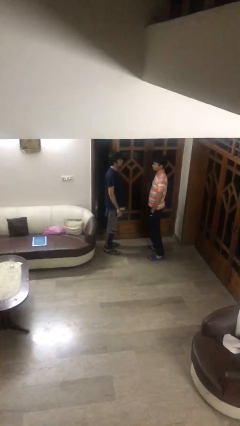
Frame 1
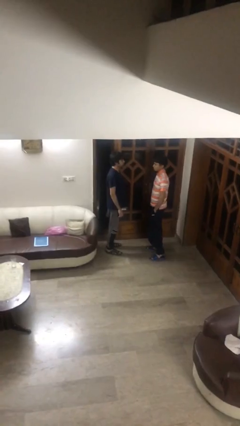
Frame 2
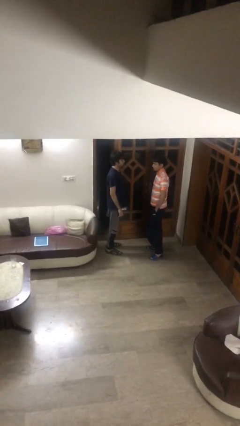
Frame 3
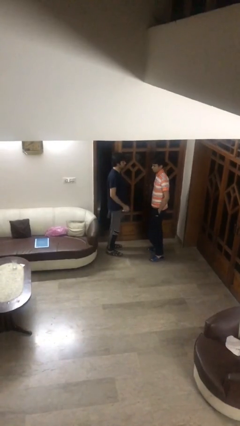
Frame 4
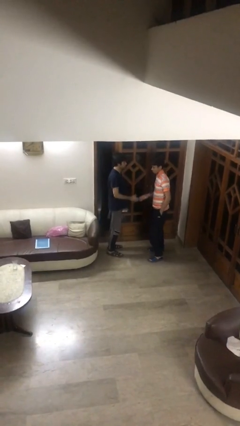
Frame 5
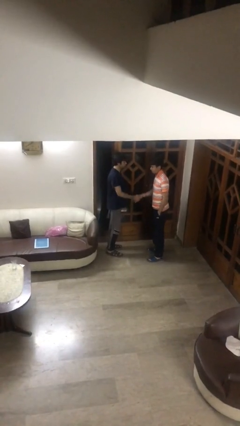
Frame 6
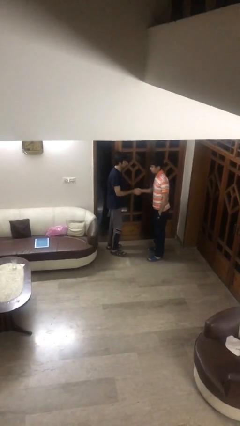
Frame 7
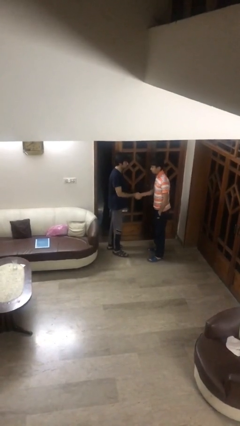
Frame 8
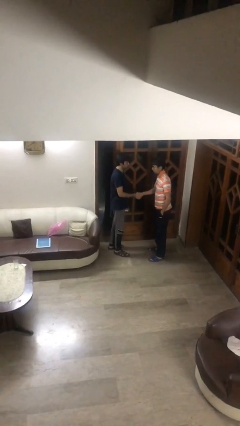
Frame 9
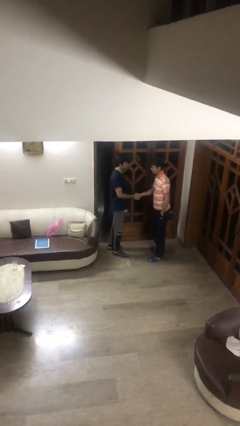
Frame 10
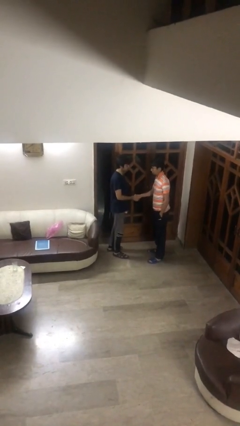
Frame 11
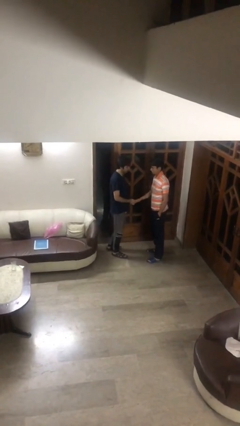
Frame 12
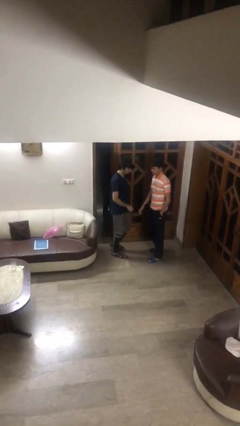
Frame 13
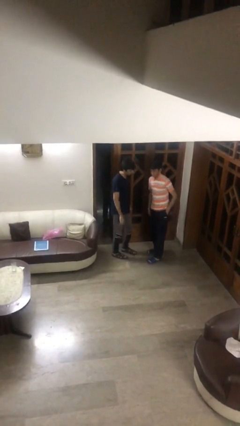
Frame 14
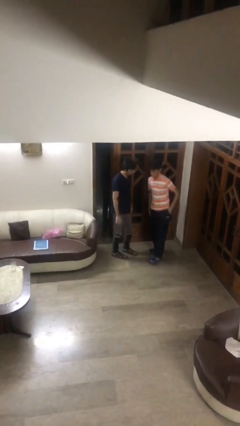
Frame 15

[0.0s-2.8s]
person shakes hand

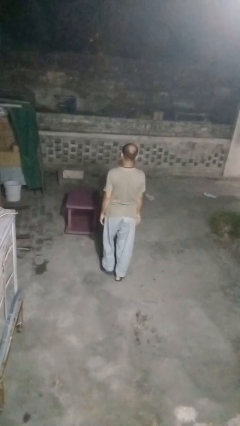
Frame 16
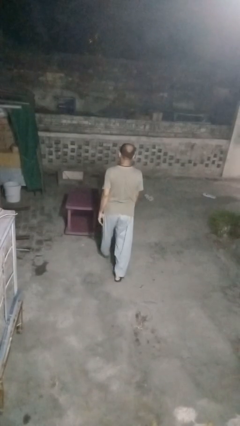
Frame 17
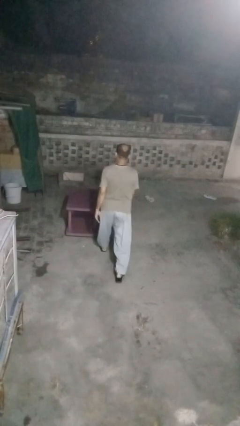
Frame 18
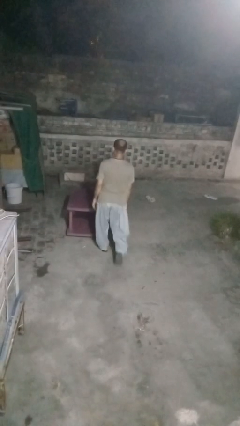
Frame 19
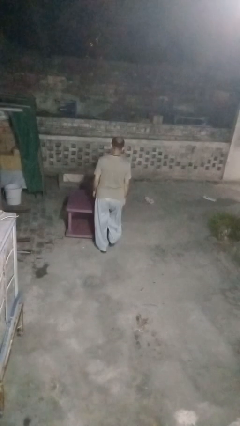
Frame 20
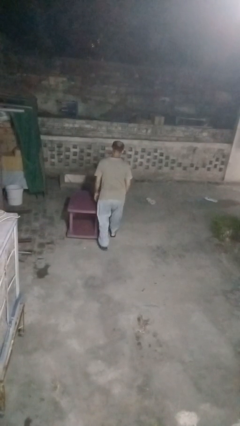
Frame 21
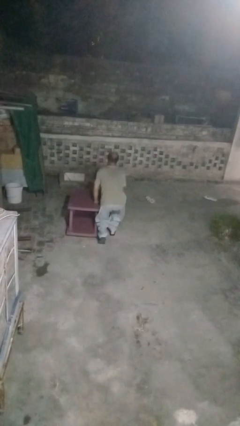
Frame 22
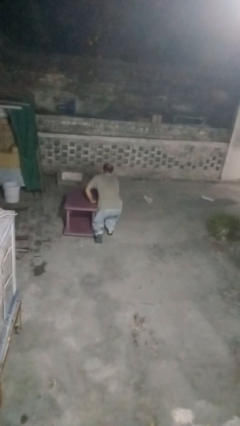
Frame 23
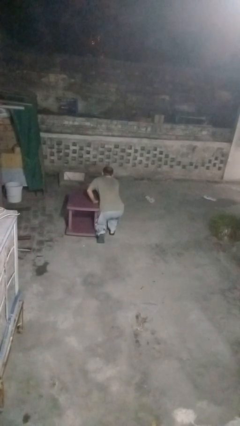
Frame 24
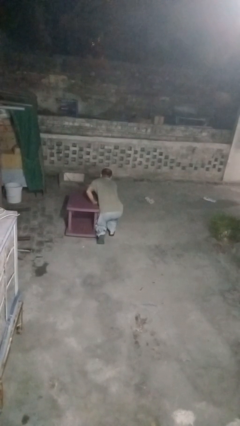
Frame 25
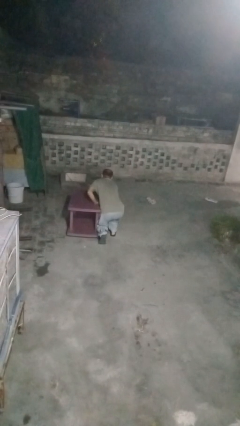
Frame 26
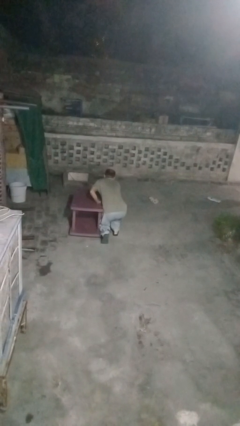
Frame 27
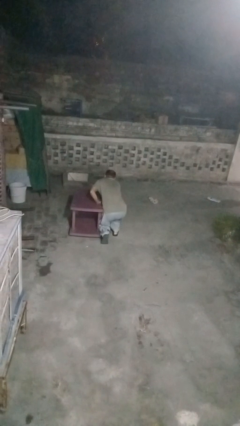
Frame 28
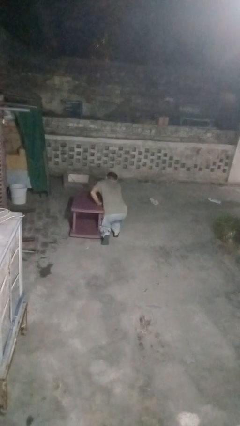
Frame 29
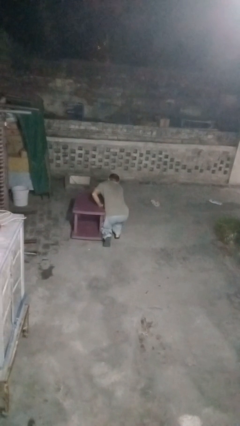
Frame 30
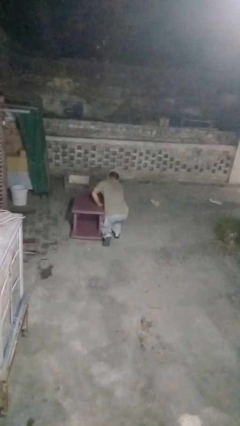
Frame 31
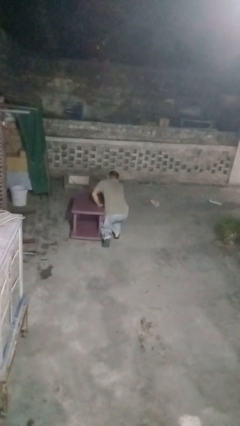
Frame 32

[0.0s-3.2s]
person bumps into table

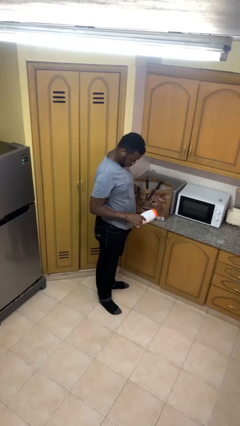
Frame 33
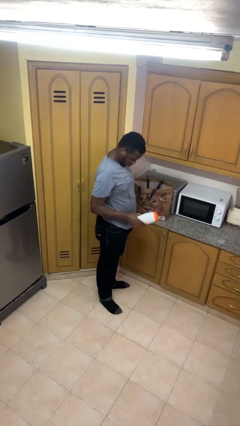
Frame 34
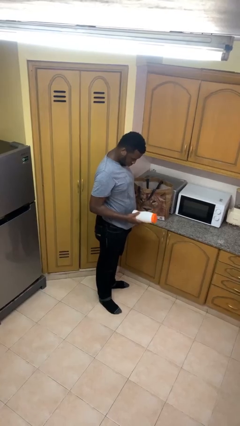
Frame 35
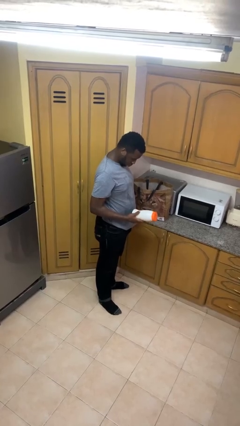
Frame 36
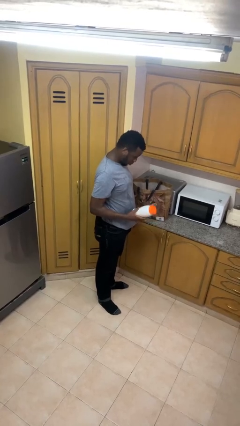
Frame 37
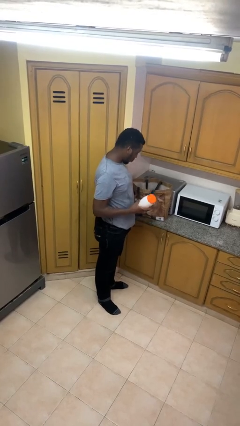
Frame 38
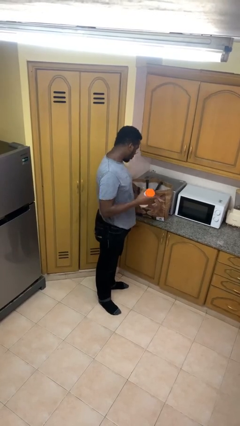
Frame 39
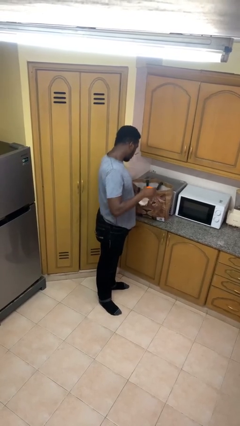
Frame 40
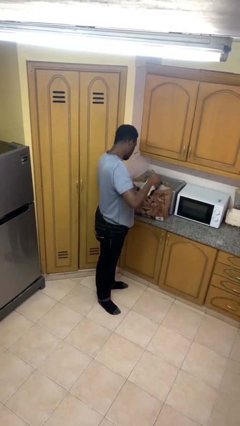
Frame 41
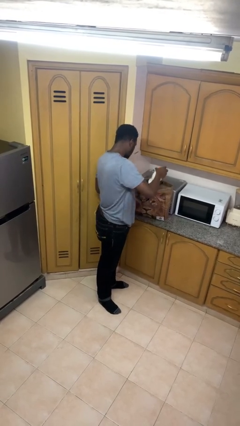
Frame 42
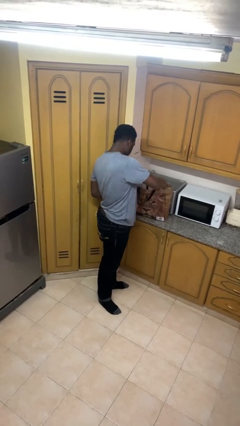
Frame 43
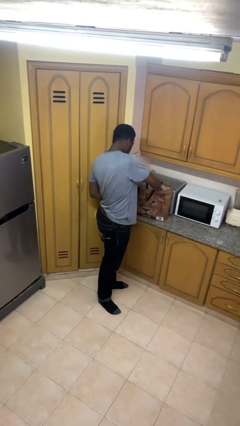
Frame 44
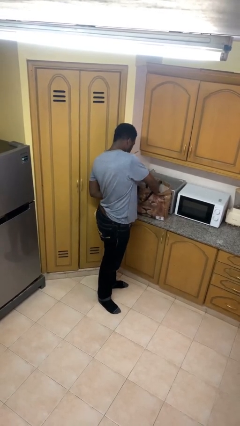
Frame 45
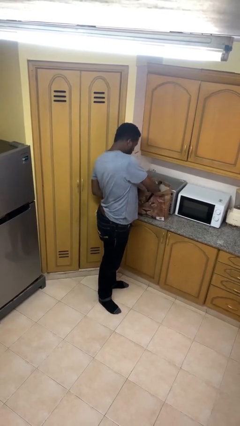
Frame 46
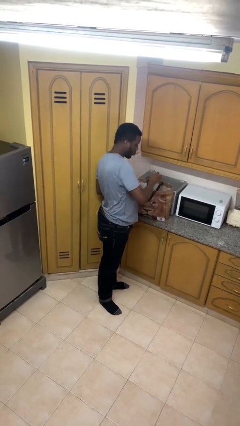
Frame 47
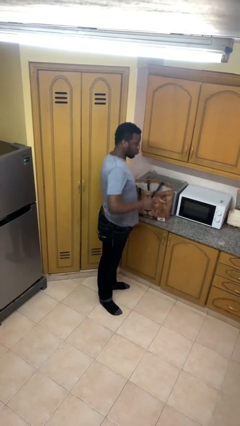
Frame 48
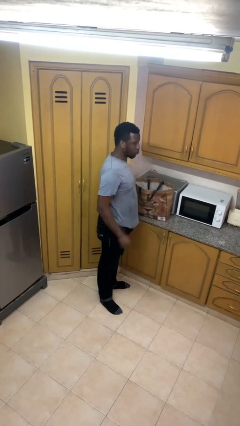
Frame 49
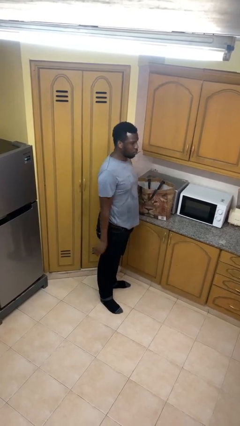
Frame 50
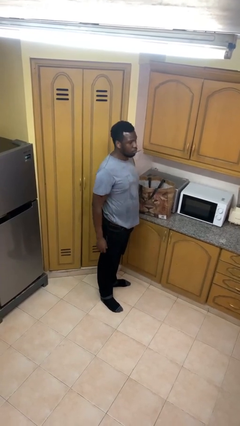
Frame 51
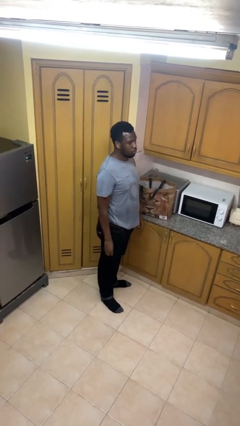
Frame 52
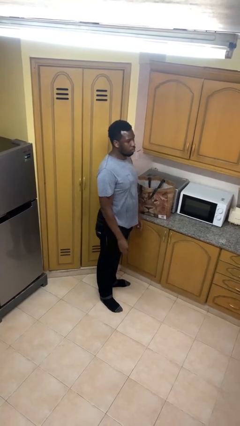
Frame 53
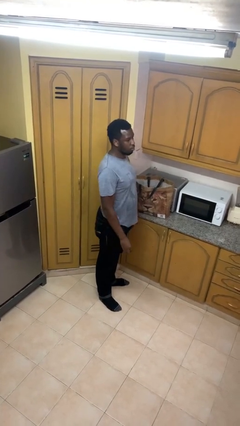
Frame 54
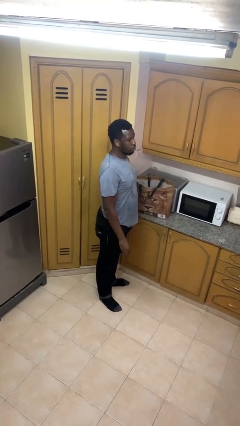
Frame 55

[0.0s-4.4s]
person puts object into bag

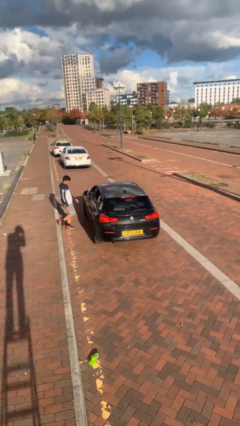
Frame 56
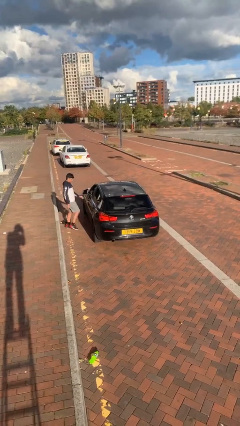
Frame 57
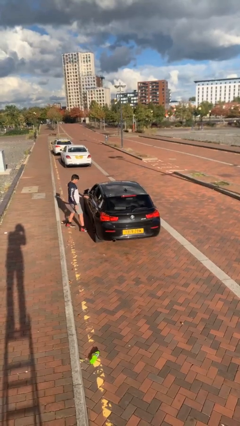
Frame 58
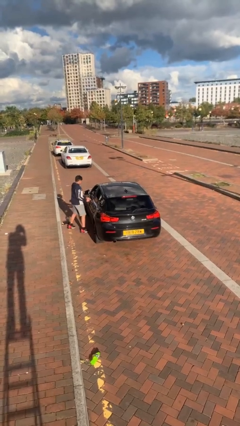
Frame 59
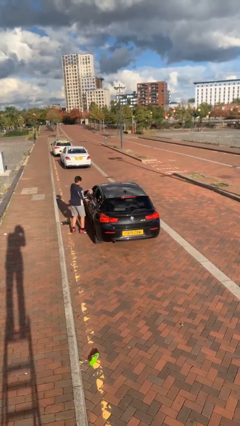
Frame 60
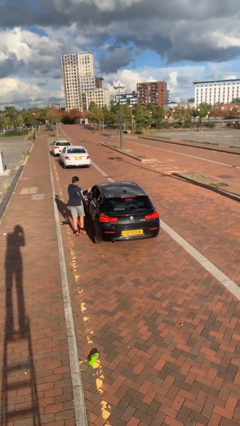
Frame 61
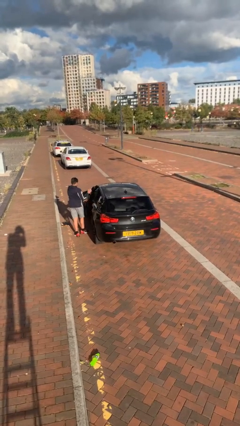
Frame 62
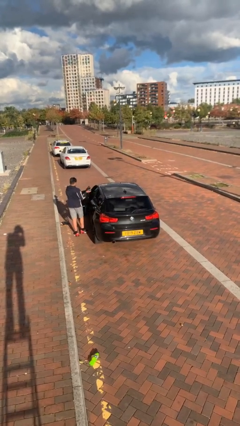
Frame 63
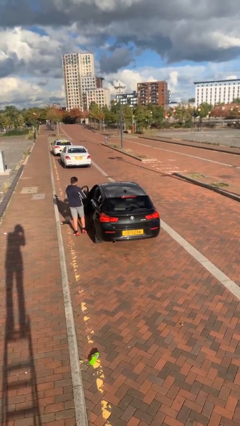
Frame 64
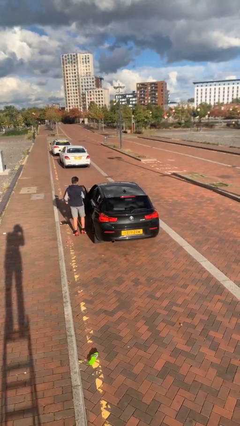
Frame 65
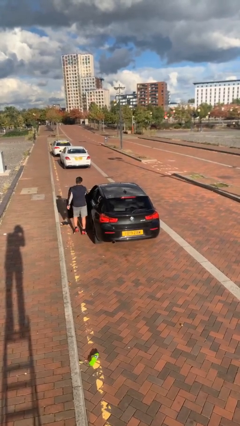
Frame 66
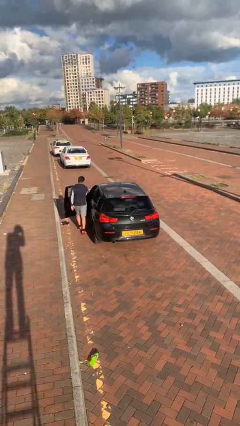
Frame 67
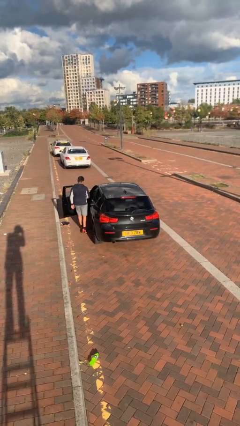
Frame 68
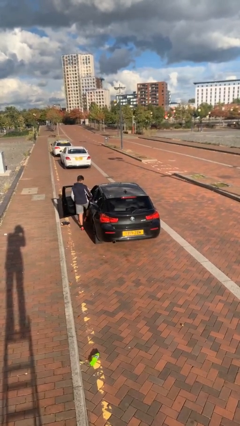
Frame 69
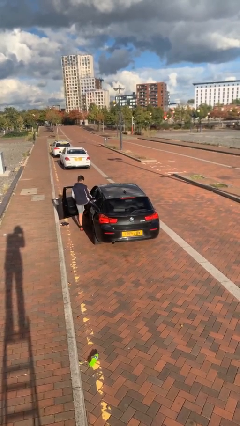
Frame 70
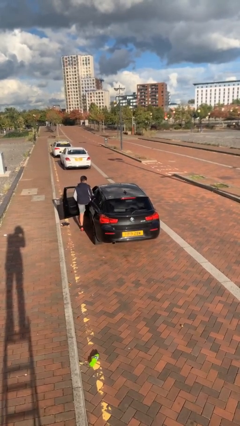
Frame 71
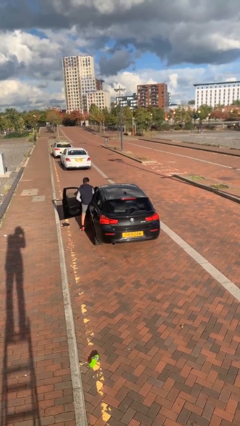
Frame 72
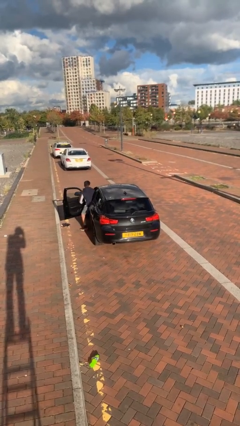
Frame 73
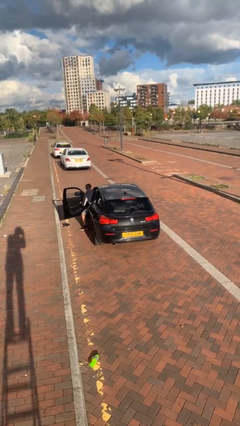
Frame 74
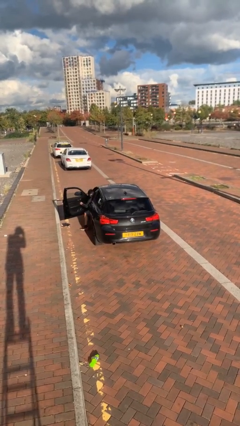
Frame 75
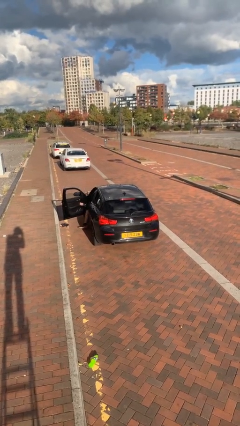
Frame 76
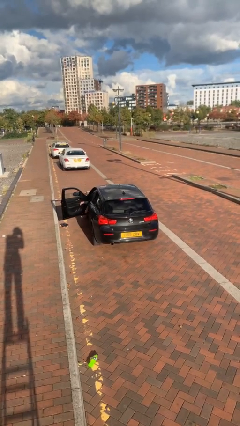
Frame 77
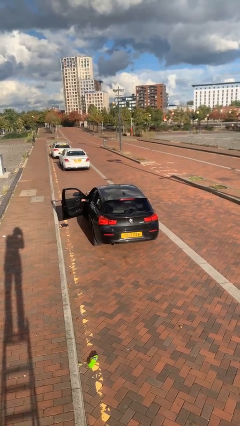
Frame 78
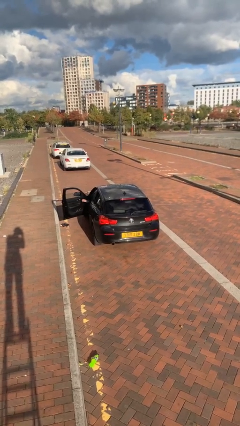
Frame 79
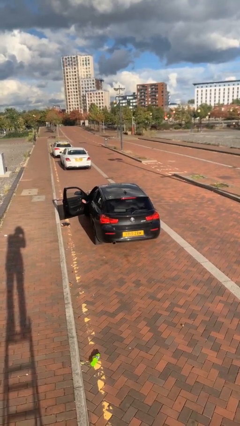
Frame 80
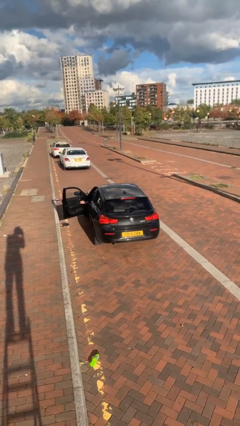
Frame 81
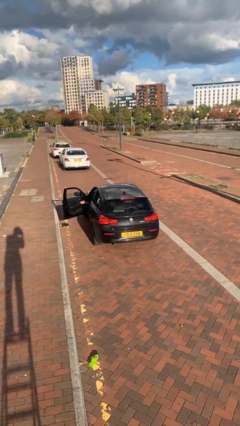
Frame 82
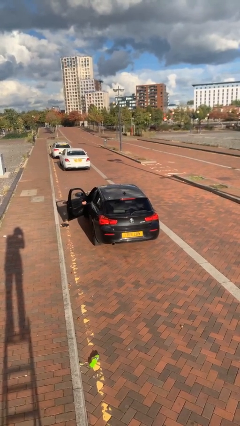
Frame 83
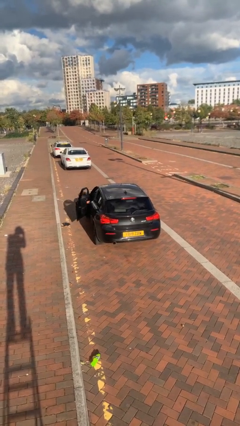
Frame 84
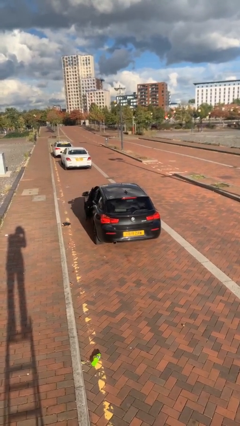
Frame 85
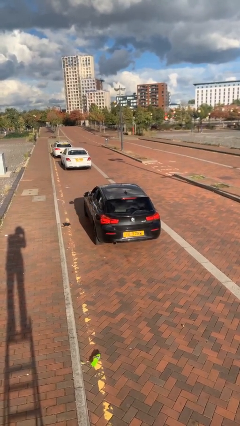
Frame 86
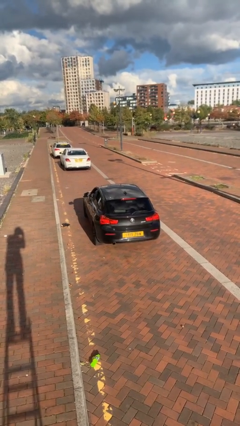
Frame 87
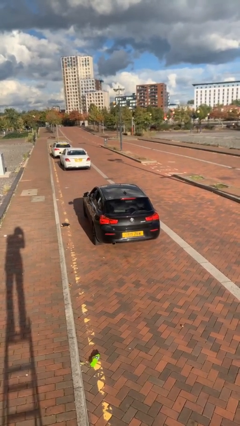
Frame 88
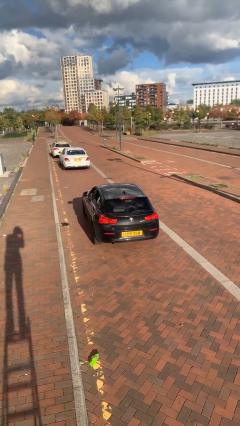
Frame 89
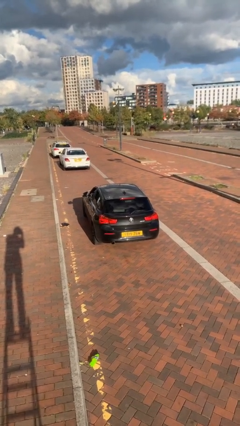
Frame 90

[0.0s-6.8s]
car picks up person

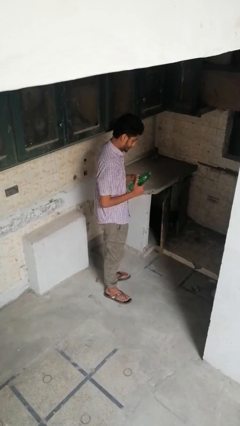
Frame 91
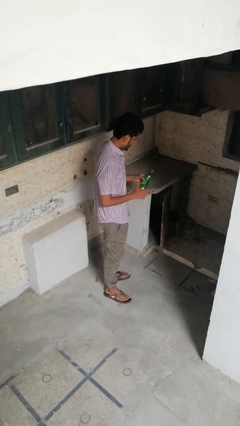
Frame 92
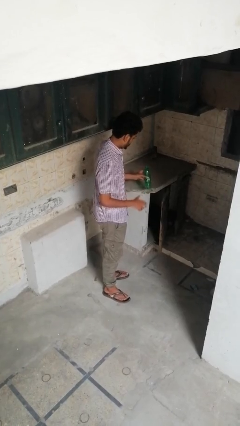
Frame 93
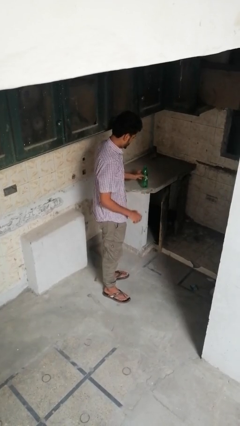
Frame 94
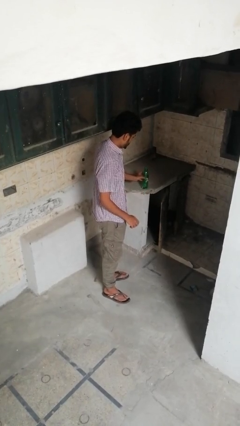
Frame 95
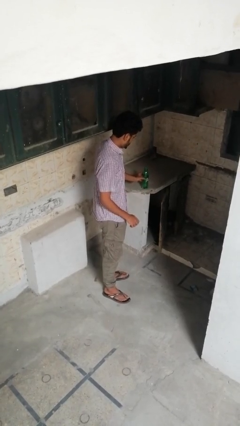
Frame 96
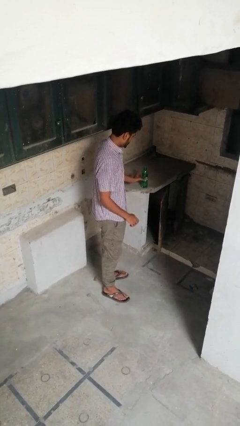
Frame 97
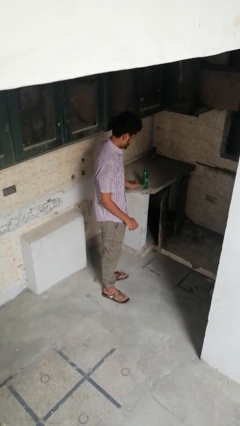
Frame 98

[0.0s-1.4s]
person puts down object on countertop
